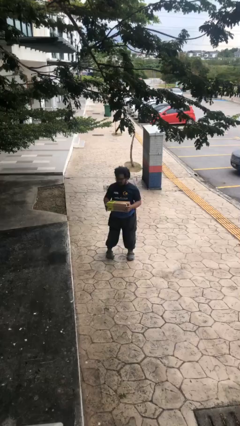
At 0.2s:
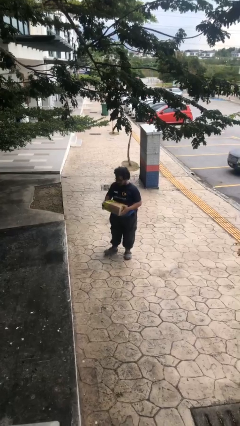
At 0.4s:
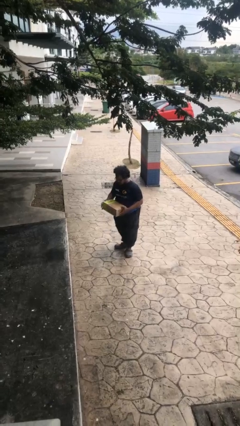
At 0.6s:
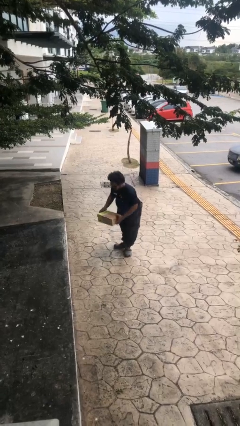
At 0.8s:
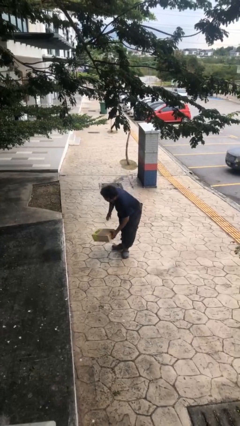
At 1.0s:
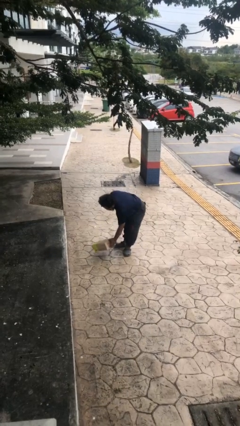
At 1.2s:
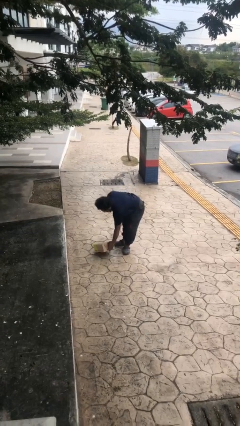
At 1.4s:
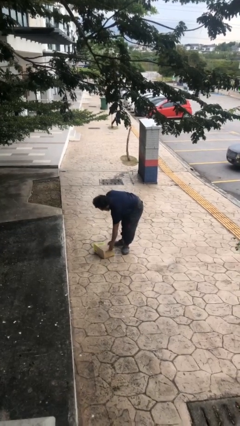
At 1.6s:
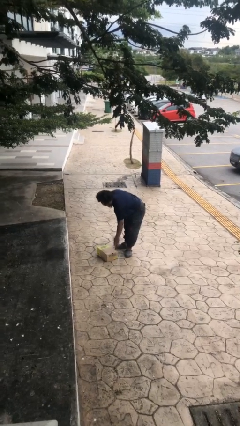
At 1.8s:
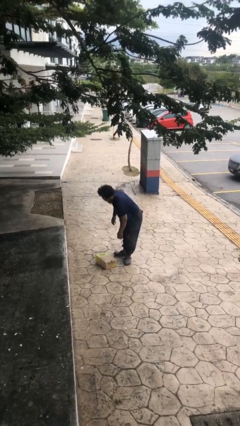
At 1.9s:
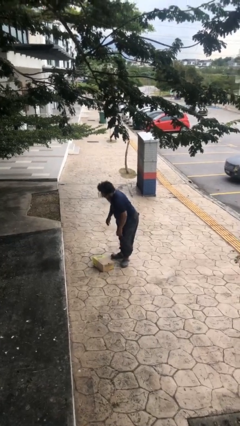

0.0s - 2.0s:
person puts down object on floor

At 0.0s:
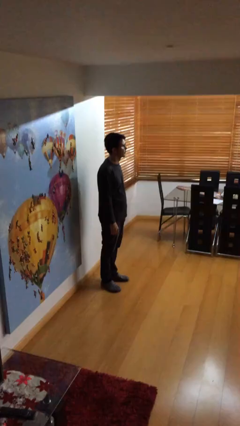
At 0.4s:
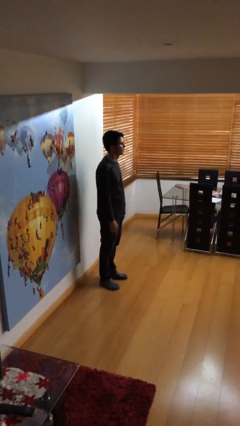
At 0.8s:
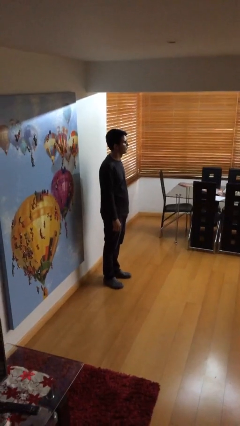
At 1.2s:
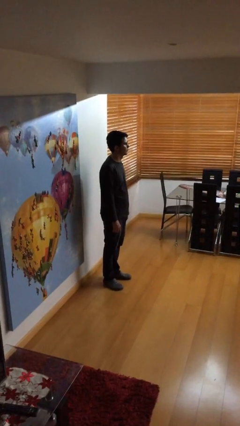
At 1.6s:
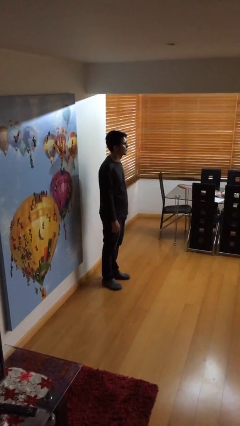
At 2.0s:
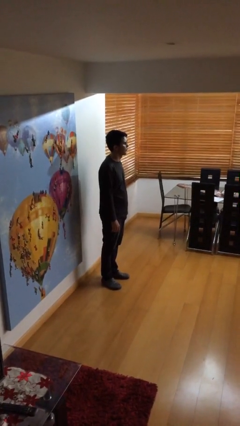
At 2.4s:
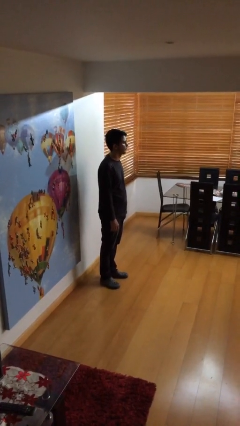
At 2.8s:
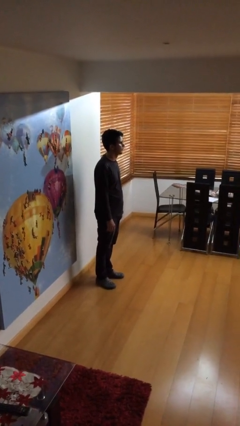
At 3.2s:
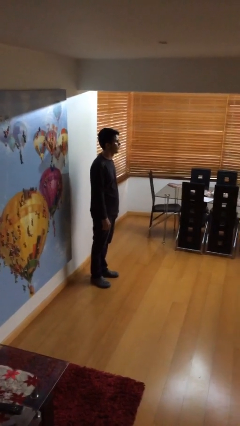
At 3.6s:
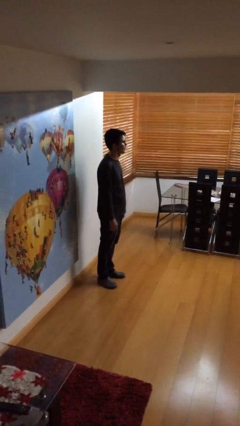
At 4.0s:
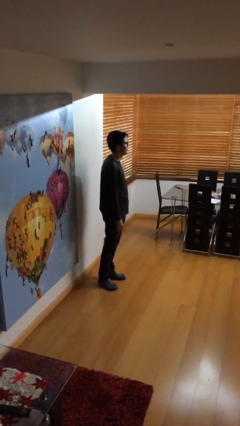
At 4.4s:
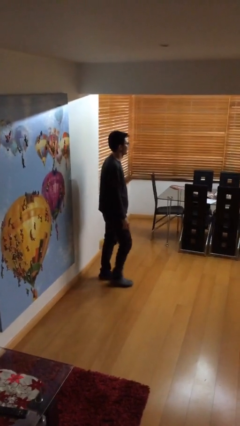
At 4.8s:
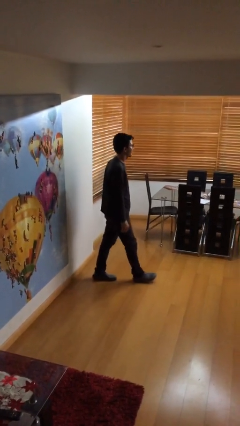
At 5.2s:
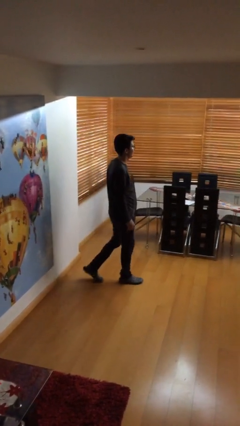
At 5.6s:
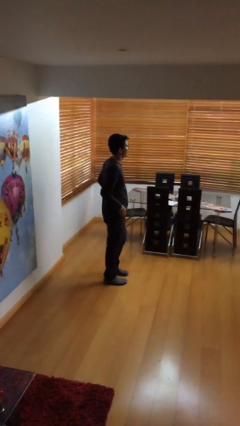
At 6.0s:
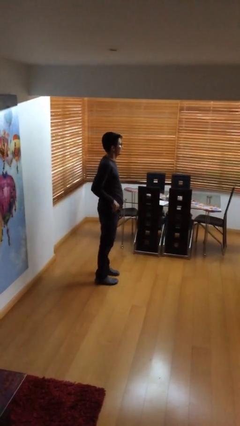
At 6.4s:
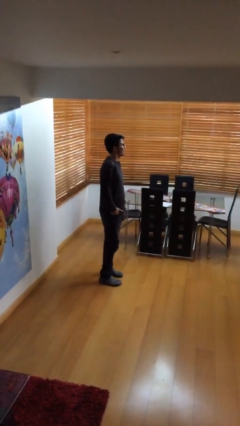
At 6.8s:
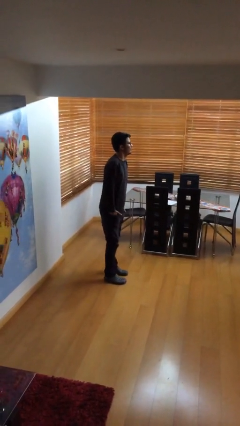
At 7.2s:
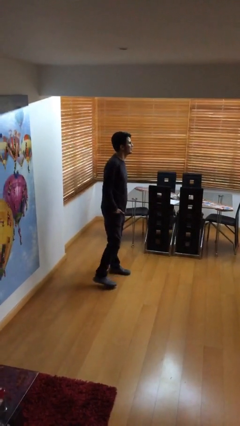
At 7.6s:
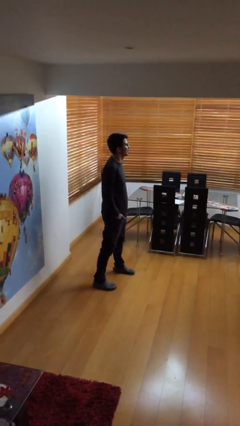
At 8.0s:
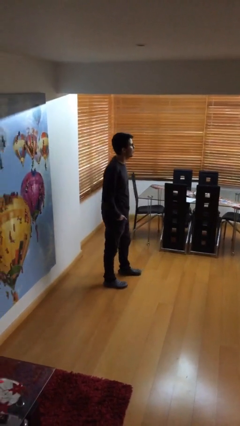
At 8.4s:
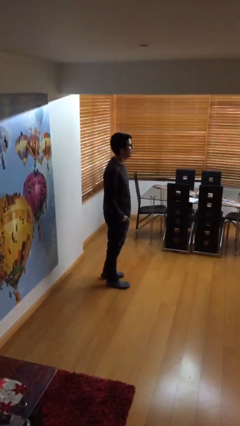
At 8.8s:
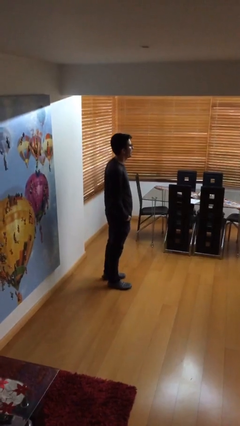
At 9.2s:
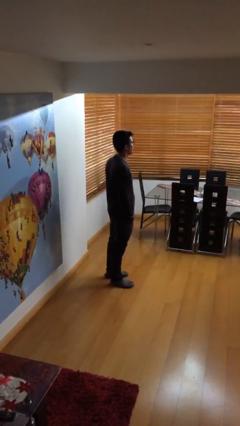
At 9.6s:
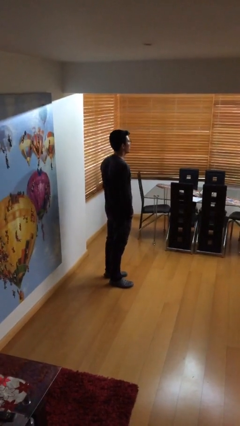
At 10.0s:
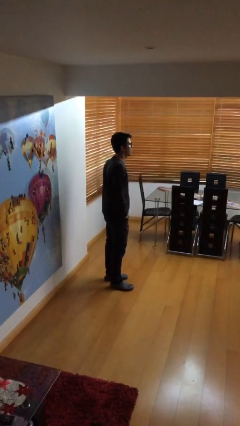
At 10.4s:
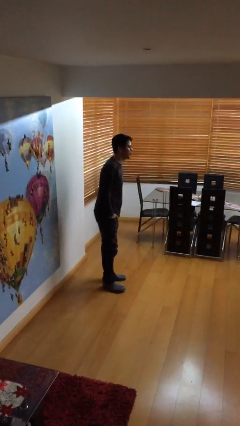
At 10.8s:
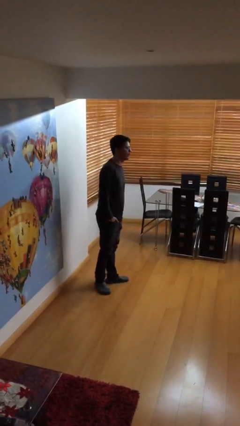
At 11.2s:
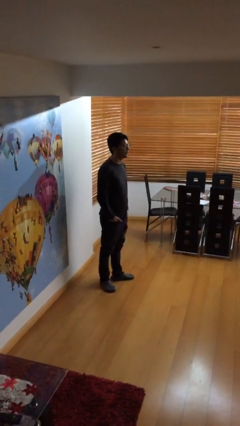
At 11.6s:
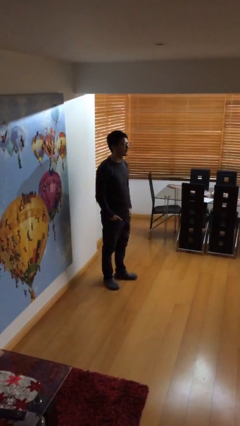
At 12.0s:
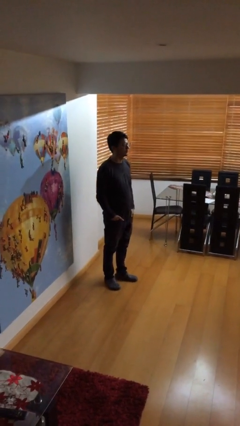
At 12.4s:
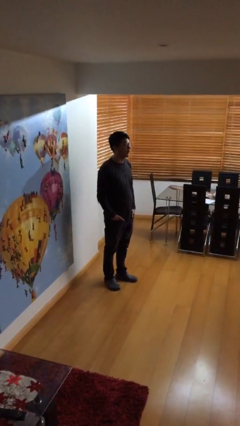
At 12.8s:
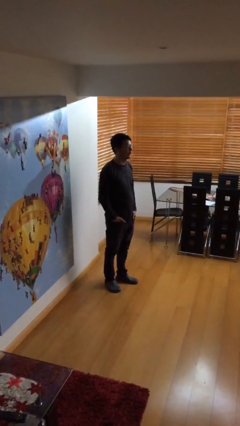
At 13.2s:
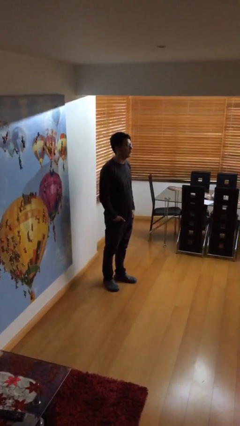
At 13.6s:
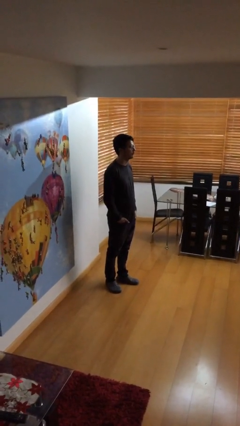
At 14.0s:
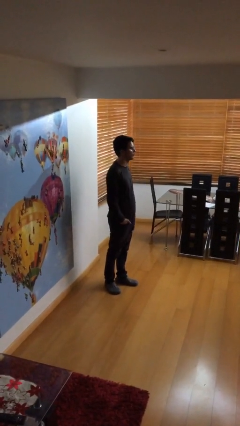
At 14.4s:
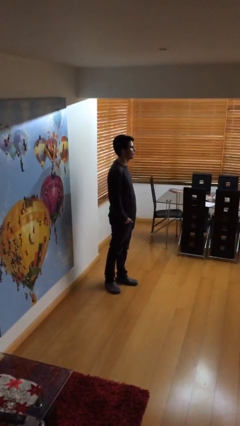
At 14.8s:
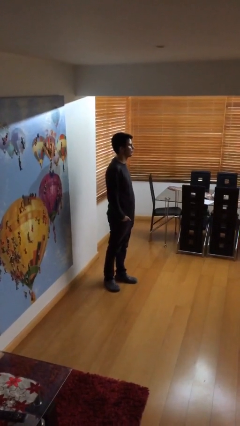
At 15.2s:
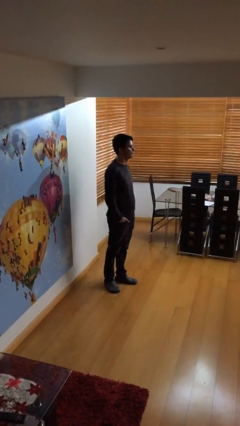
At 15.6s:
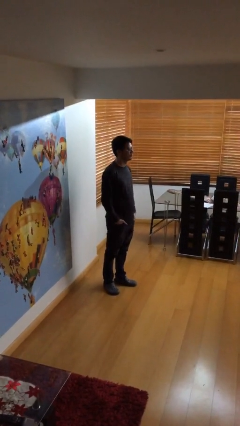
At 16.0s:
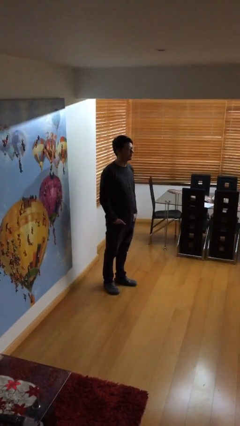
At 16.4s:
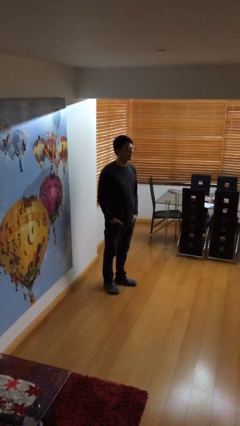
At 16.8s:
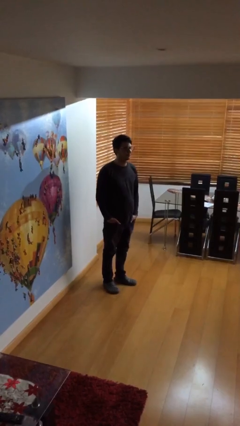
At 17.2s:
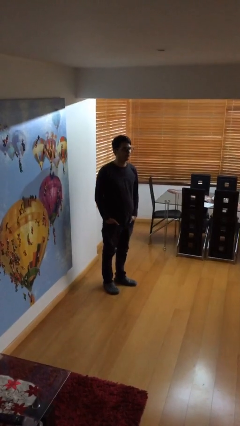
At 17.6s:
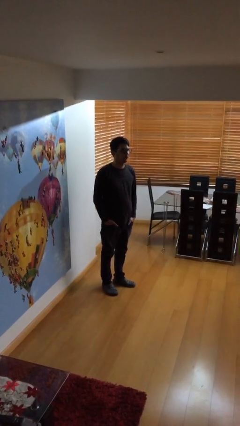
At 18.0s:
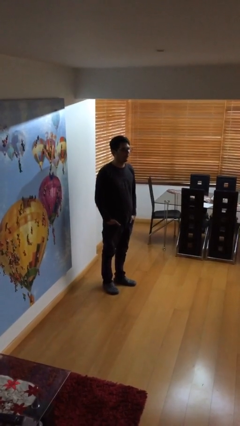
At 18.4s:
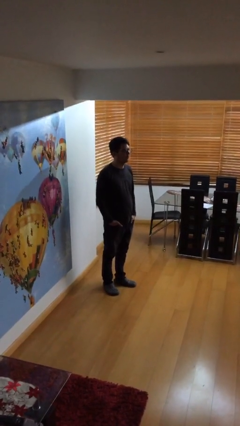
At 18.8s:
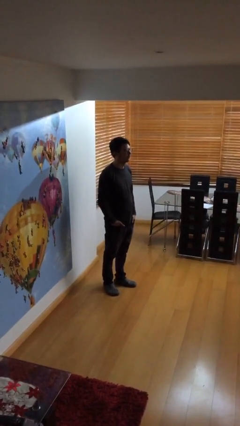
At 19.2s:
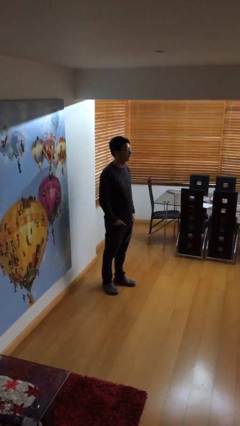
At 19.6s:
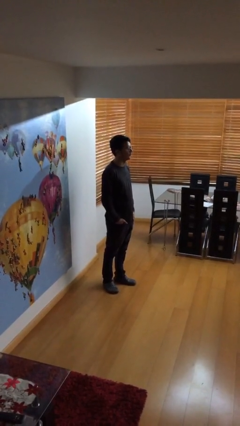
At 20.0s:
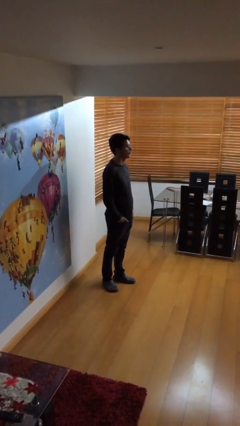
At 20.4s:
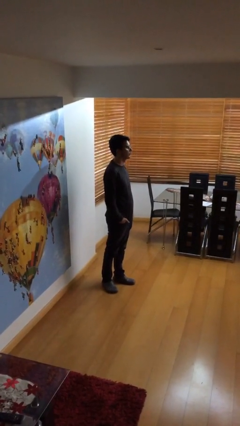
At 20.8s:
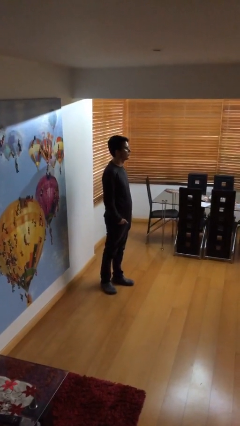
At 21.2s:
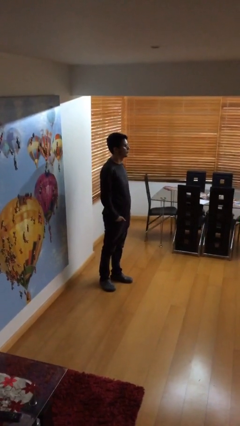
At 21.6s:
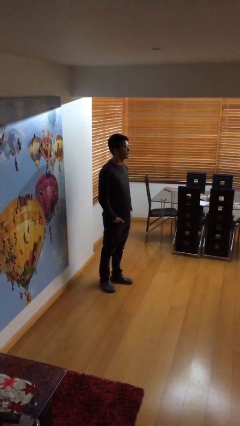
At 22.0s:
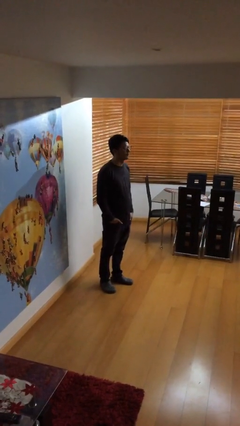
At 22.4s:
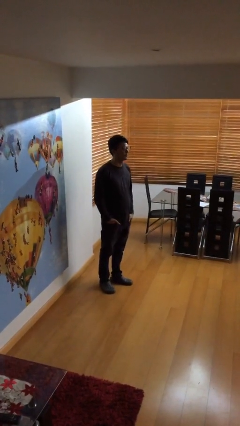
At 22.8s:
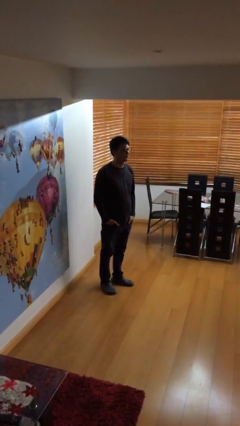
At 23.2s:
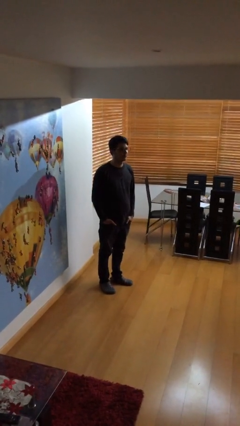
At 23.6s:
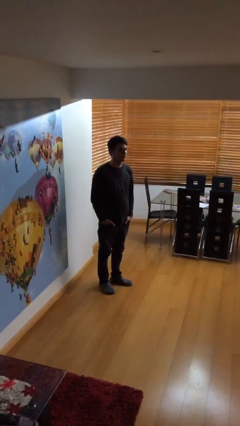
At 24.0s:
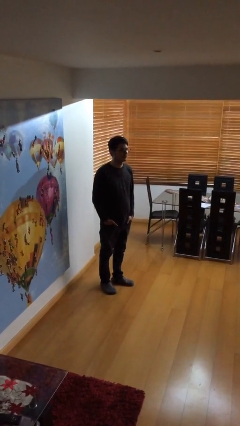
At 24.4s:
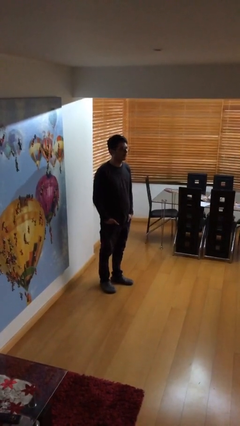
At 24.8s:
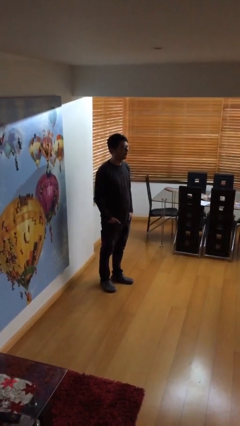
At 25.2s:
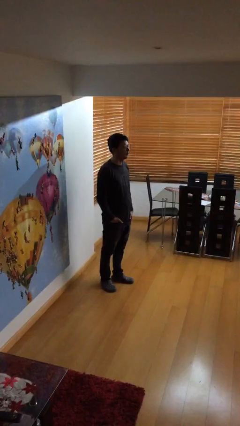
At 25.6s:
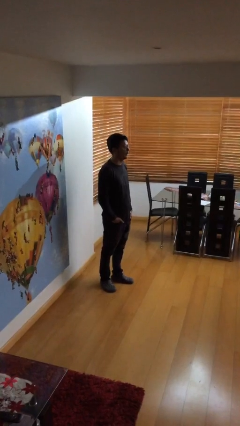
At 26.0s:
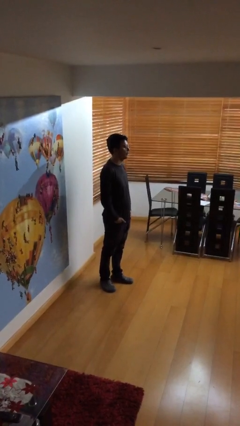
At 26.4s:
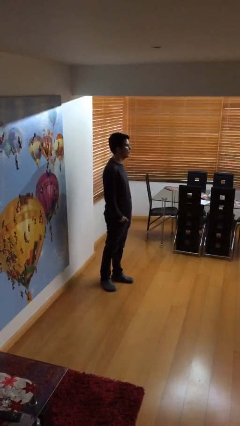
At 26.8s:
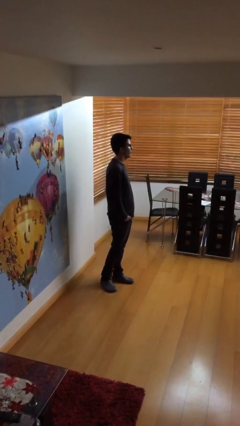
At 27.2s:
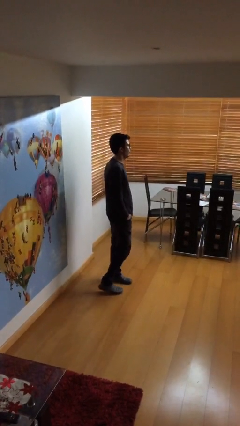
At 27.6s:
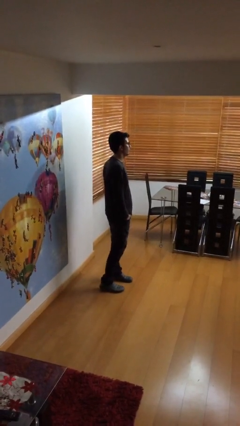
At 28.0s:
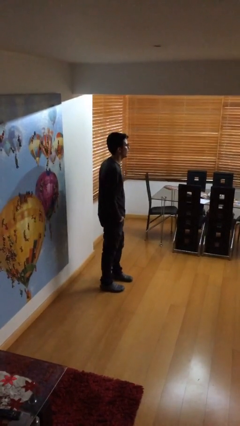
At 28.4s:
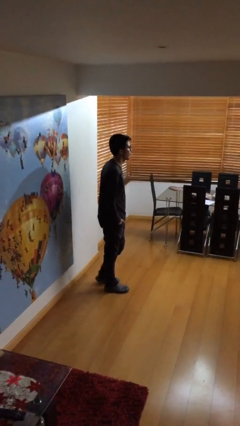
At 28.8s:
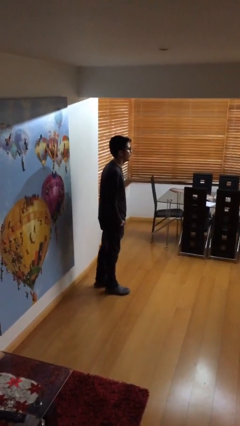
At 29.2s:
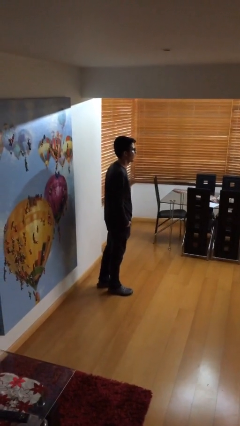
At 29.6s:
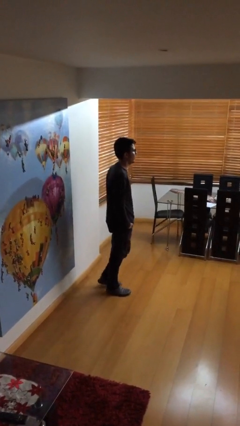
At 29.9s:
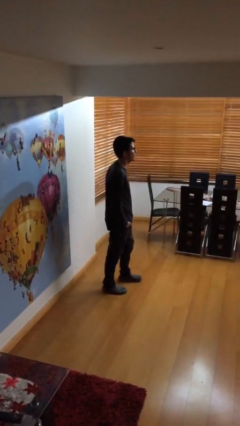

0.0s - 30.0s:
person walks

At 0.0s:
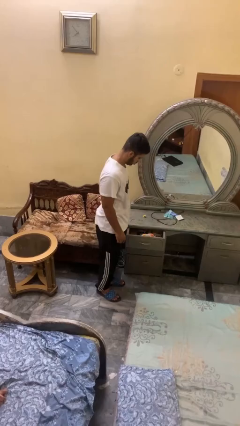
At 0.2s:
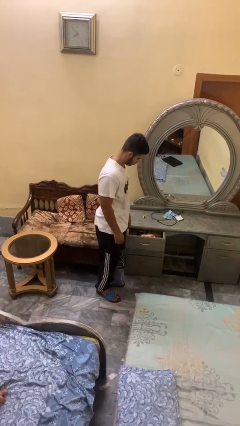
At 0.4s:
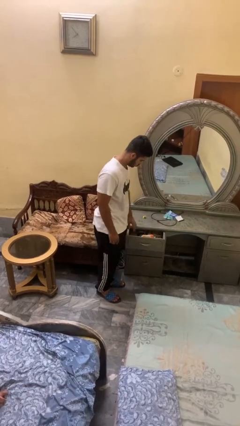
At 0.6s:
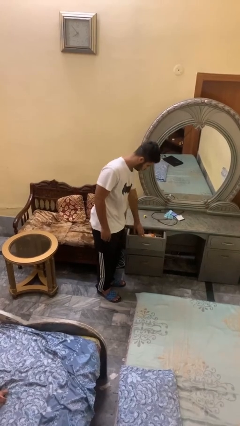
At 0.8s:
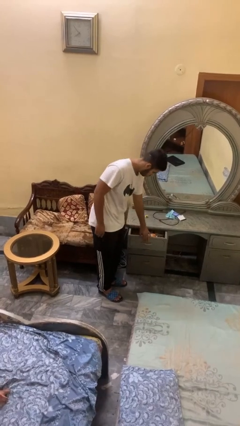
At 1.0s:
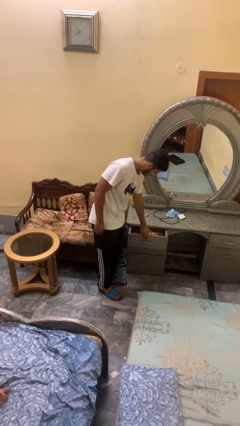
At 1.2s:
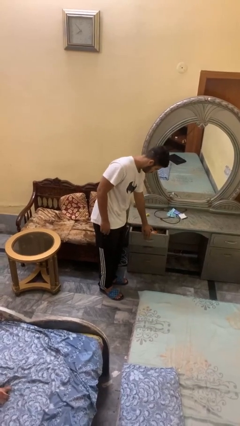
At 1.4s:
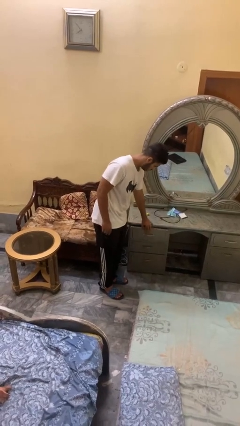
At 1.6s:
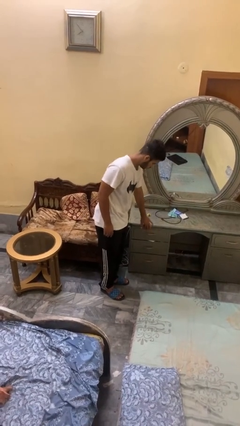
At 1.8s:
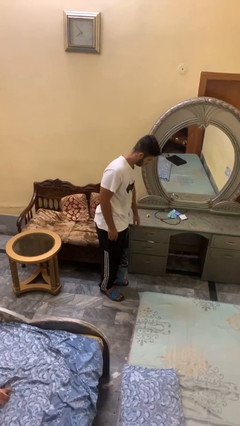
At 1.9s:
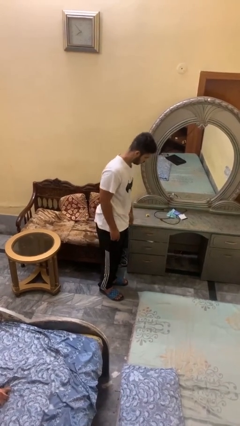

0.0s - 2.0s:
person closes dresser drawer
